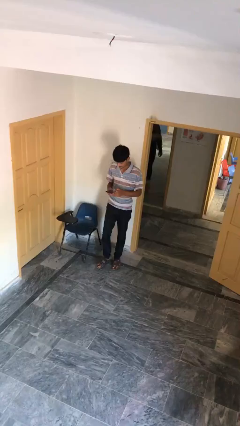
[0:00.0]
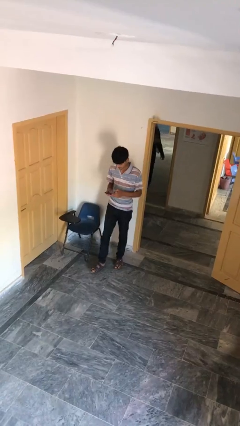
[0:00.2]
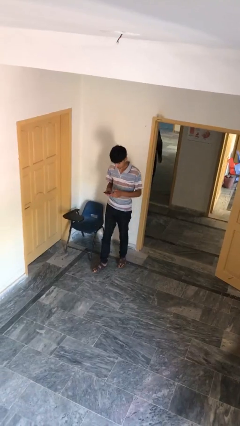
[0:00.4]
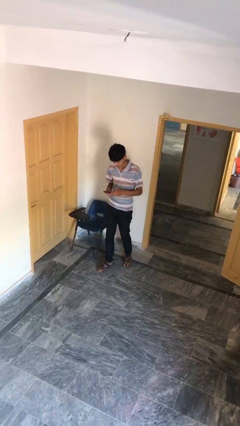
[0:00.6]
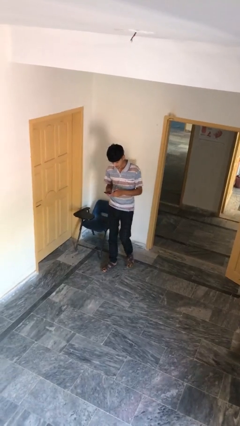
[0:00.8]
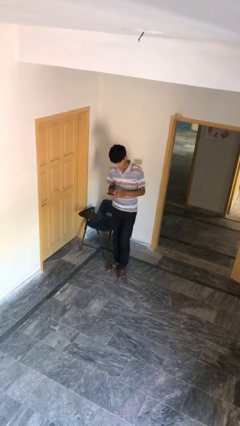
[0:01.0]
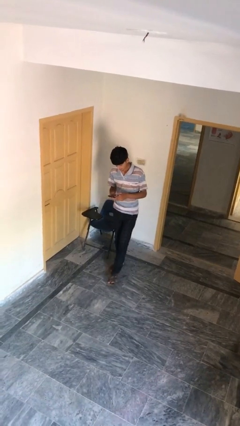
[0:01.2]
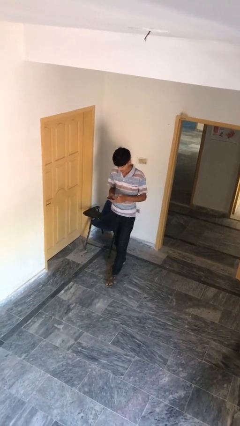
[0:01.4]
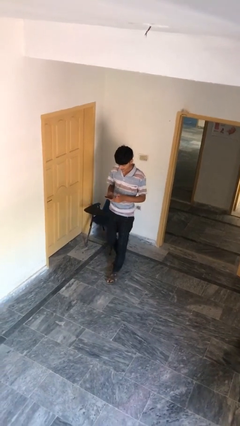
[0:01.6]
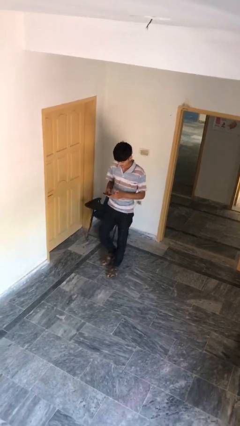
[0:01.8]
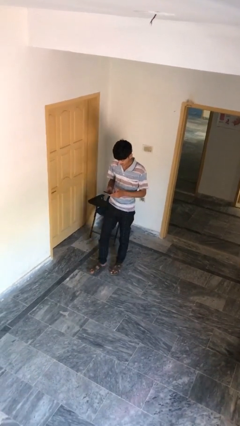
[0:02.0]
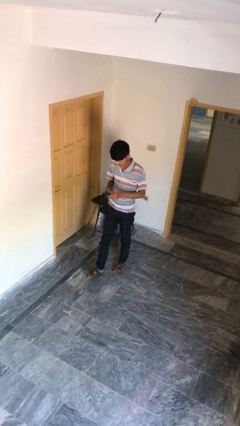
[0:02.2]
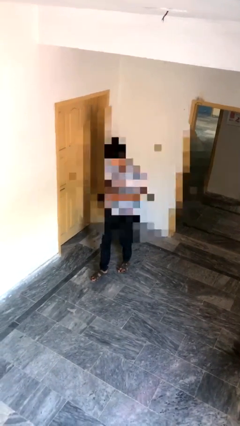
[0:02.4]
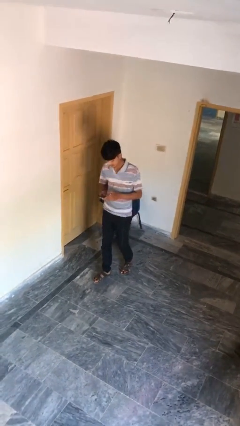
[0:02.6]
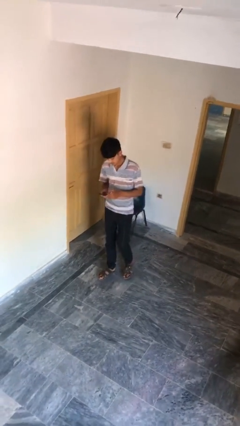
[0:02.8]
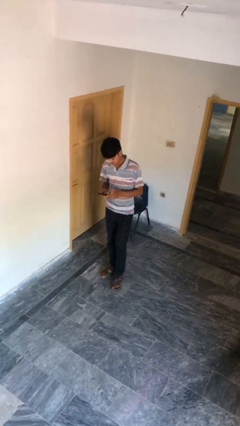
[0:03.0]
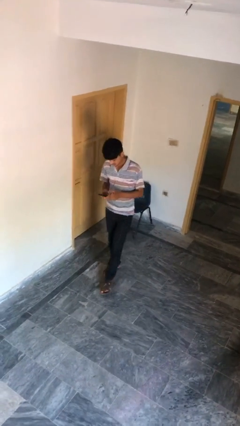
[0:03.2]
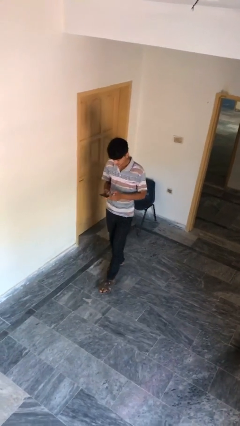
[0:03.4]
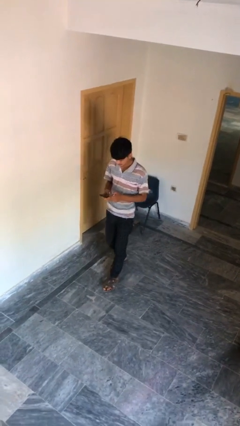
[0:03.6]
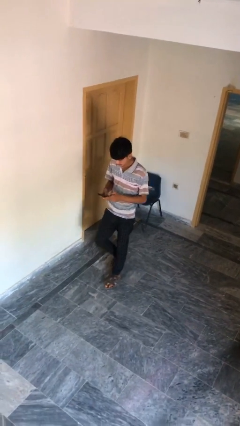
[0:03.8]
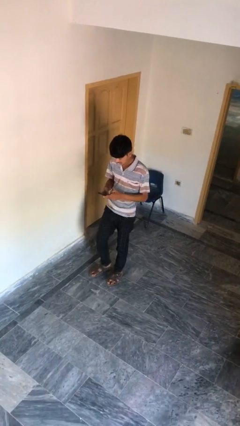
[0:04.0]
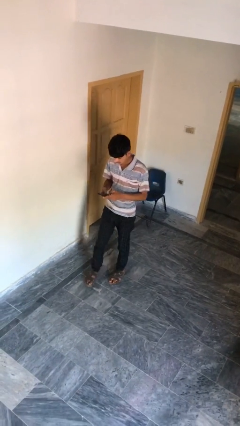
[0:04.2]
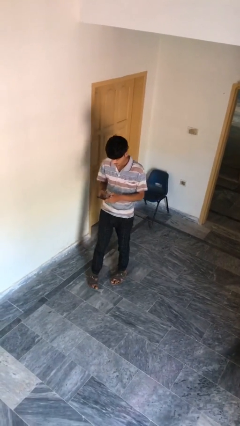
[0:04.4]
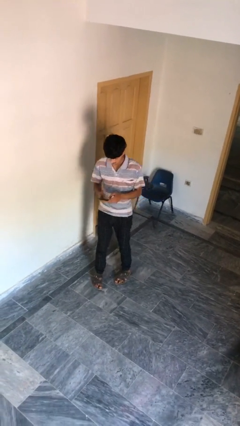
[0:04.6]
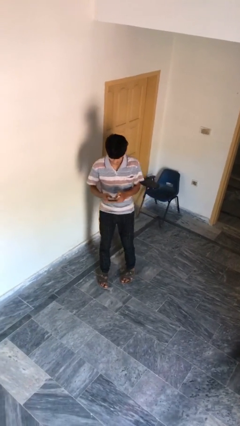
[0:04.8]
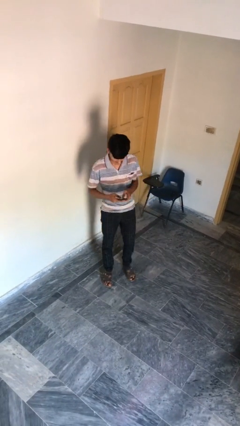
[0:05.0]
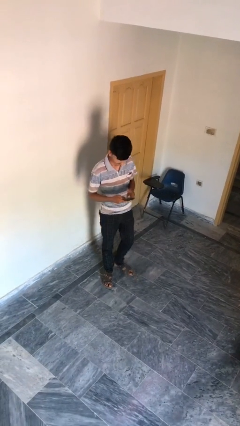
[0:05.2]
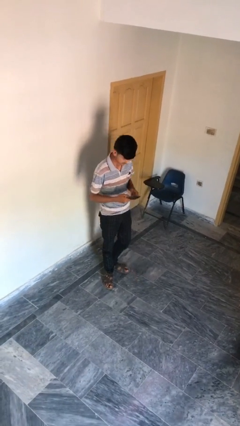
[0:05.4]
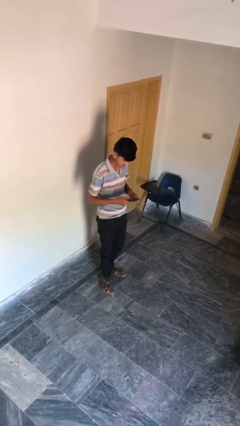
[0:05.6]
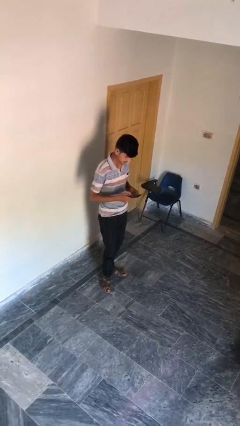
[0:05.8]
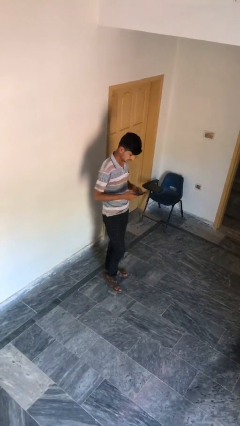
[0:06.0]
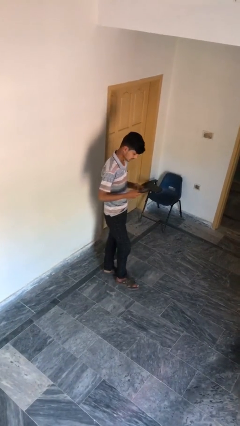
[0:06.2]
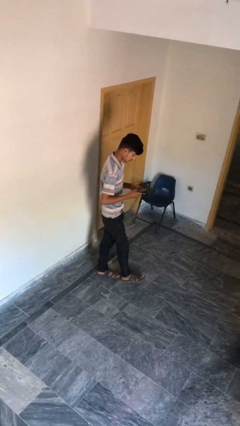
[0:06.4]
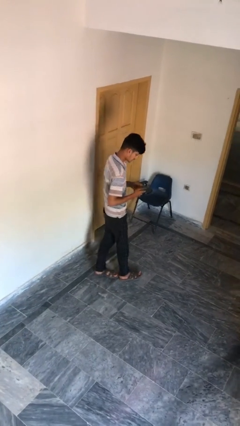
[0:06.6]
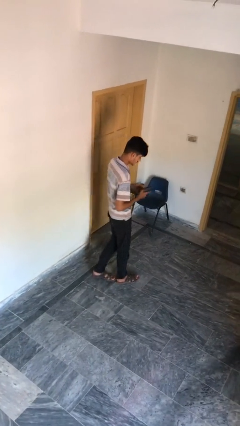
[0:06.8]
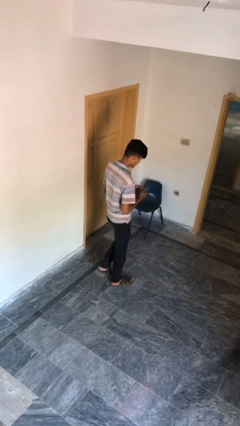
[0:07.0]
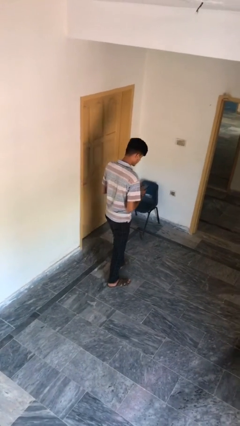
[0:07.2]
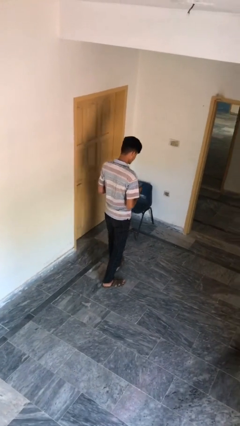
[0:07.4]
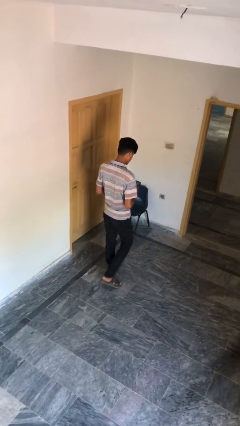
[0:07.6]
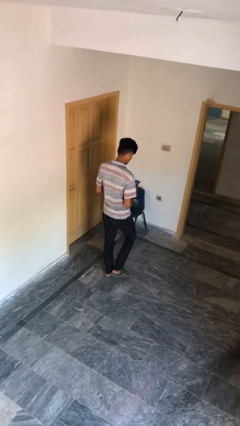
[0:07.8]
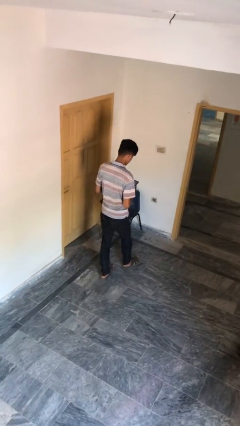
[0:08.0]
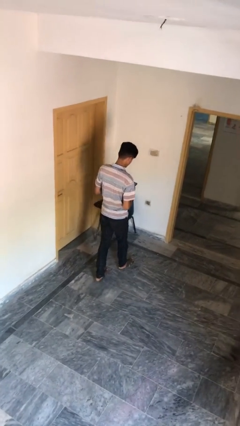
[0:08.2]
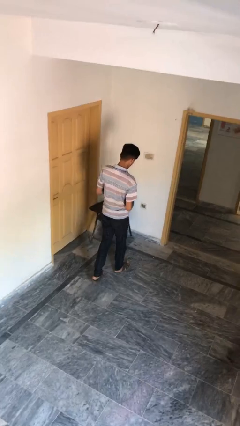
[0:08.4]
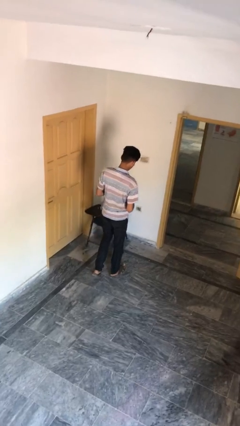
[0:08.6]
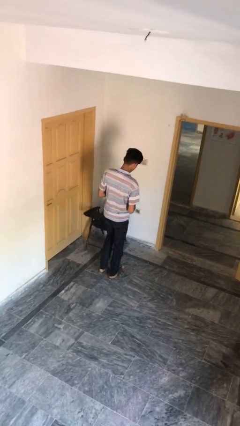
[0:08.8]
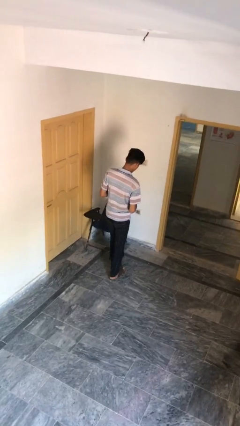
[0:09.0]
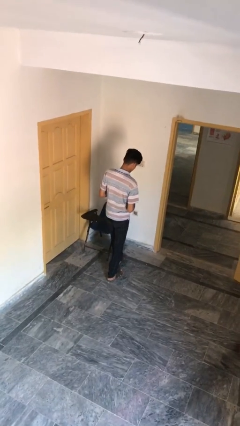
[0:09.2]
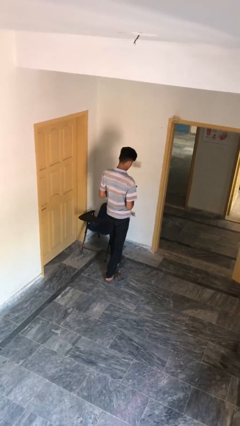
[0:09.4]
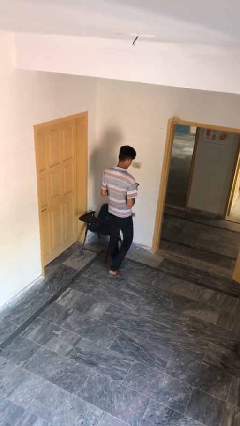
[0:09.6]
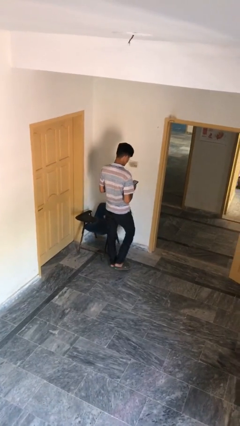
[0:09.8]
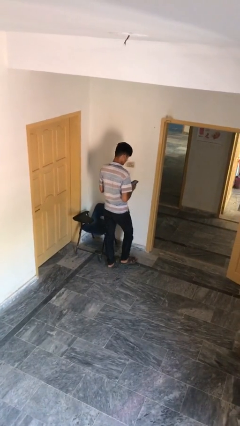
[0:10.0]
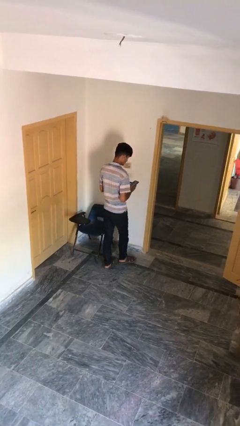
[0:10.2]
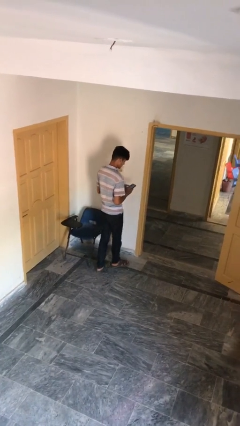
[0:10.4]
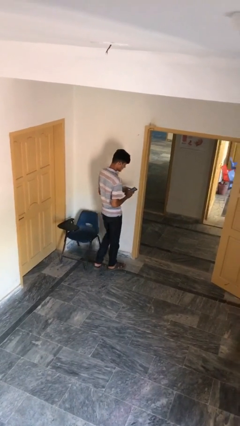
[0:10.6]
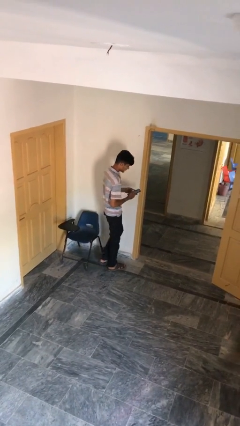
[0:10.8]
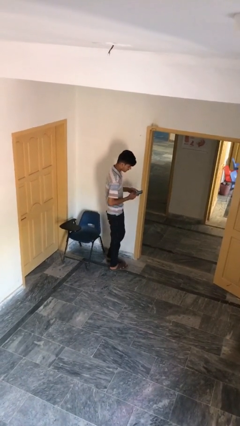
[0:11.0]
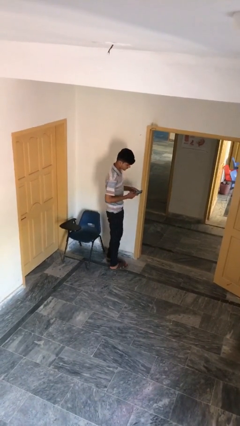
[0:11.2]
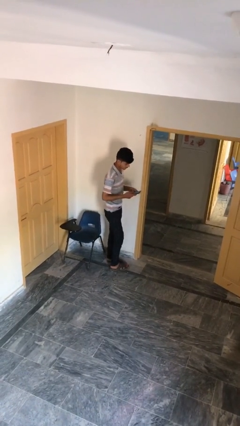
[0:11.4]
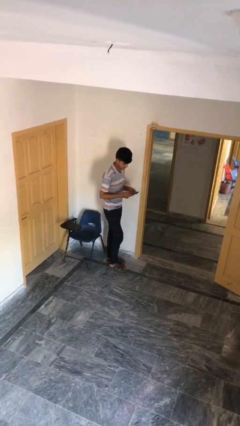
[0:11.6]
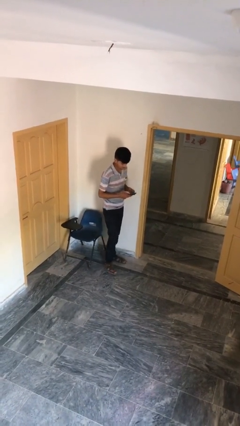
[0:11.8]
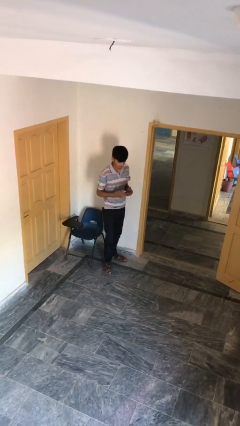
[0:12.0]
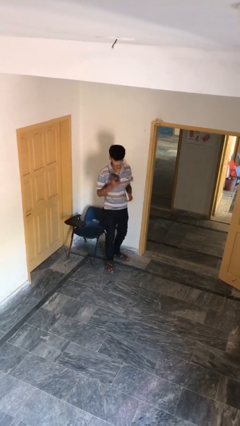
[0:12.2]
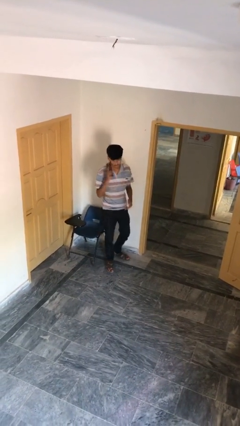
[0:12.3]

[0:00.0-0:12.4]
person texts on phone

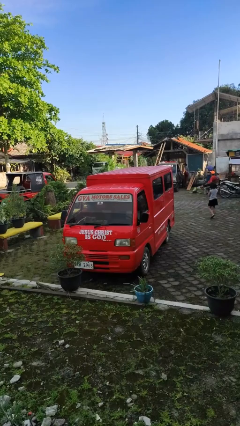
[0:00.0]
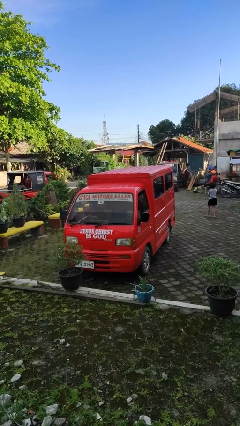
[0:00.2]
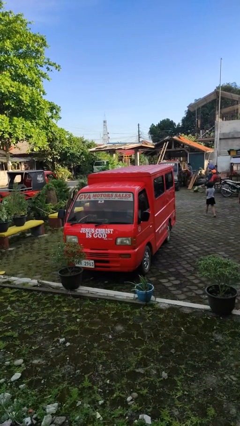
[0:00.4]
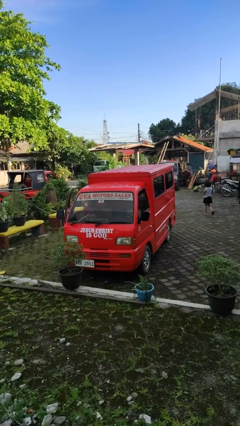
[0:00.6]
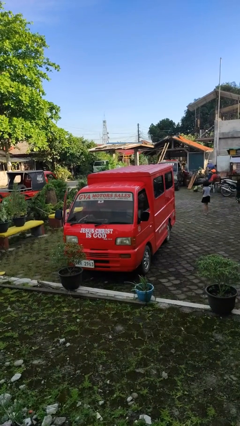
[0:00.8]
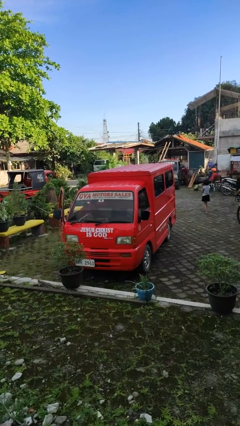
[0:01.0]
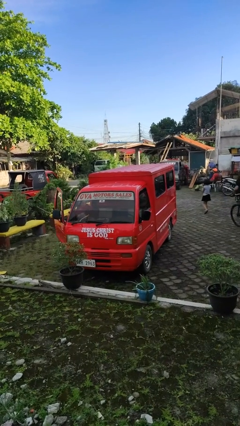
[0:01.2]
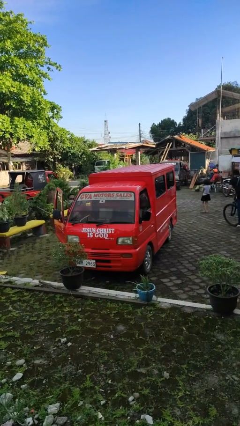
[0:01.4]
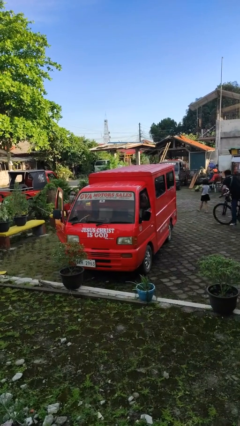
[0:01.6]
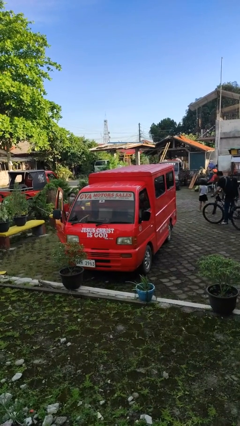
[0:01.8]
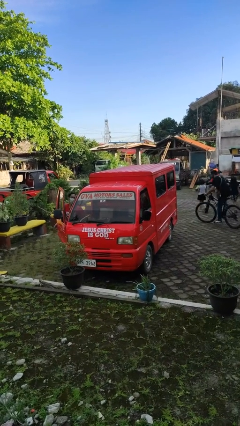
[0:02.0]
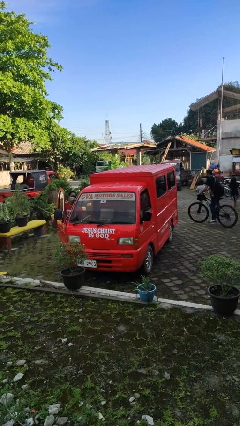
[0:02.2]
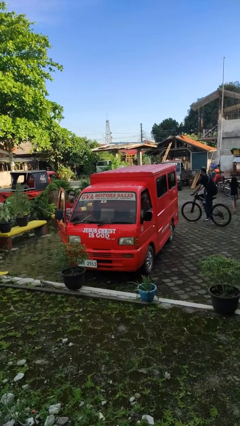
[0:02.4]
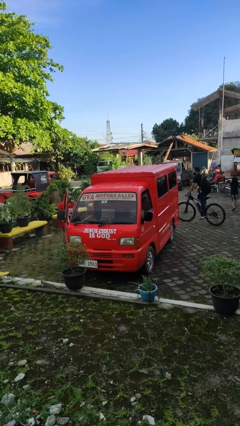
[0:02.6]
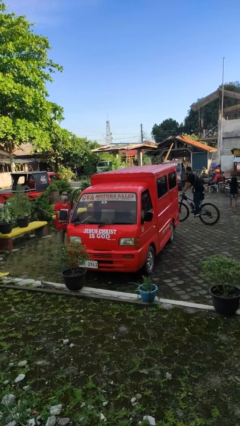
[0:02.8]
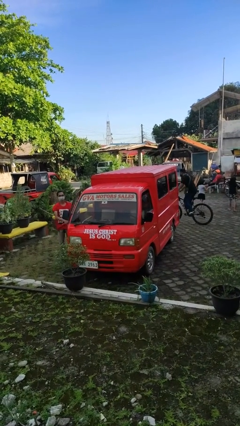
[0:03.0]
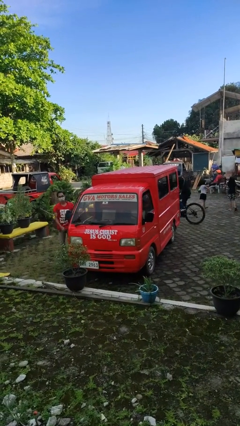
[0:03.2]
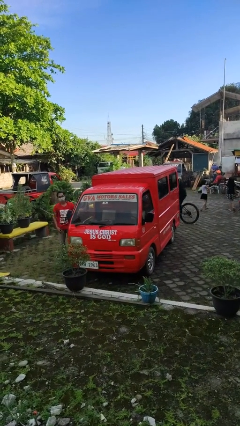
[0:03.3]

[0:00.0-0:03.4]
car drops off person

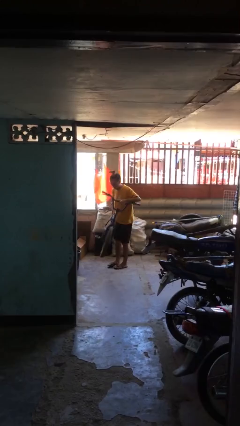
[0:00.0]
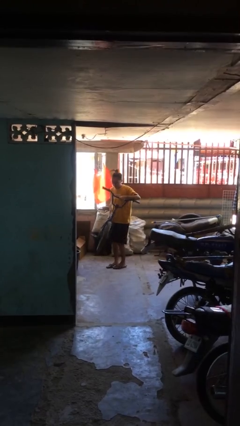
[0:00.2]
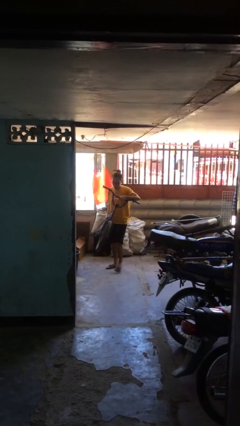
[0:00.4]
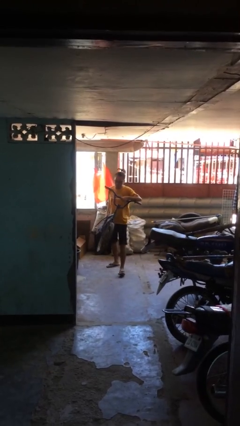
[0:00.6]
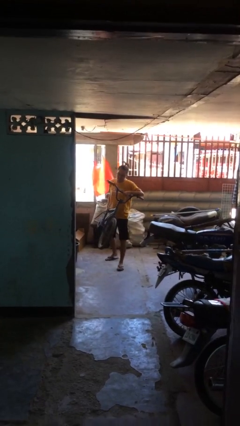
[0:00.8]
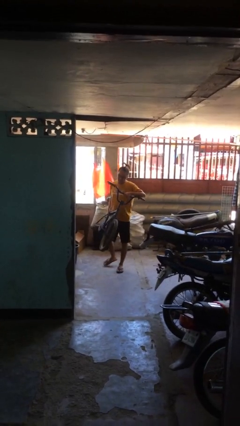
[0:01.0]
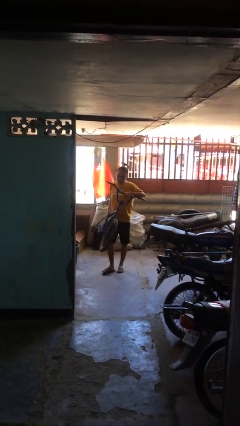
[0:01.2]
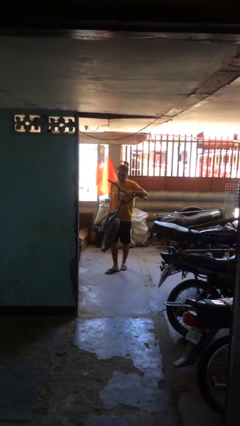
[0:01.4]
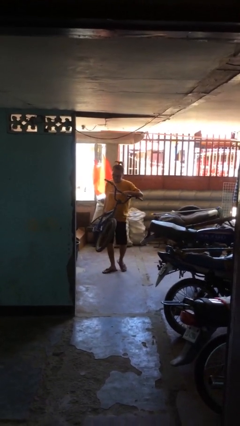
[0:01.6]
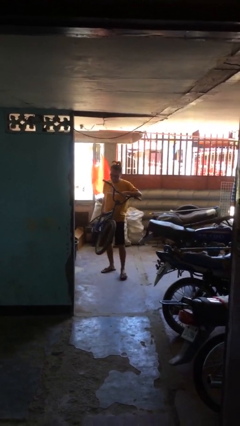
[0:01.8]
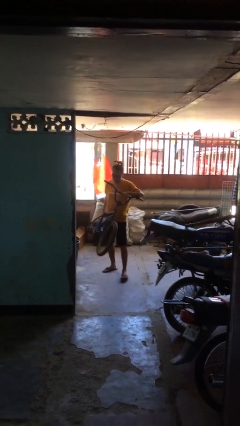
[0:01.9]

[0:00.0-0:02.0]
person carries heavy object

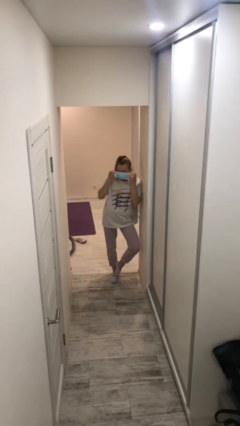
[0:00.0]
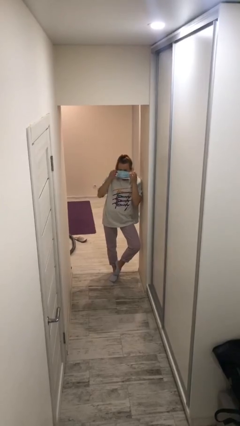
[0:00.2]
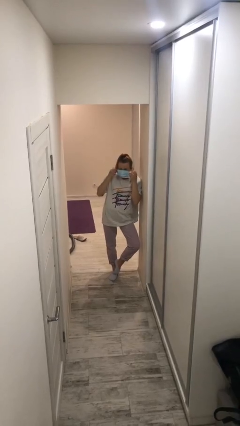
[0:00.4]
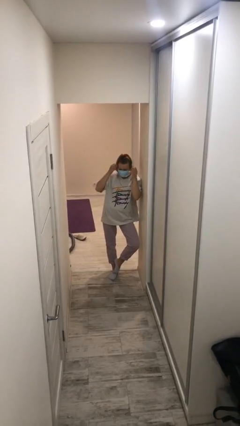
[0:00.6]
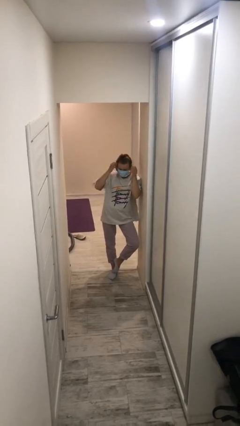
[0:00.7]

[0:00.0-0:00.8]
person puts on facemask
